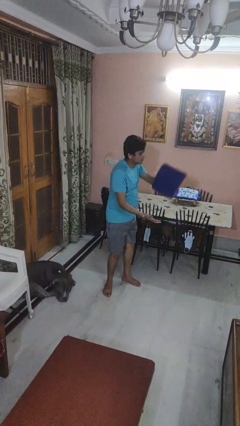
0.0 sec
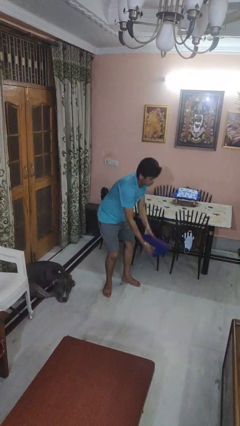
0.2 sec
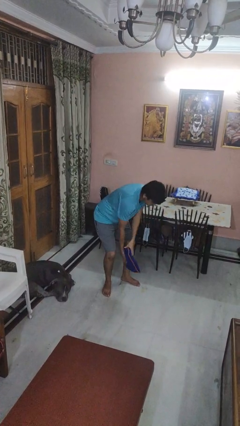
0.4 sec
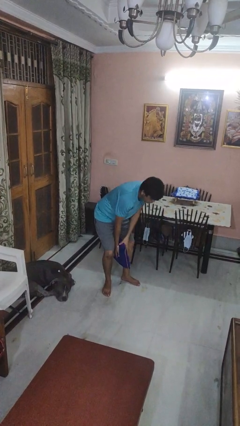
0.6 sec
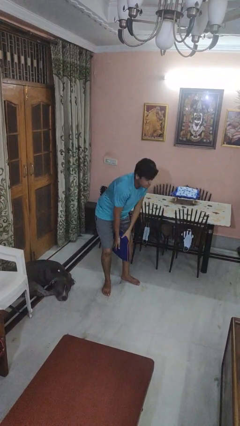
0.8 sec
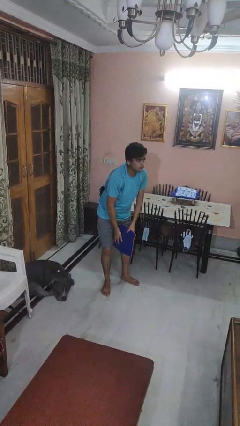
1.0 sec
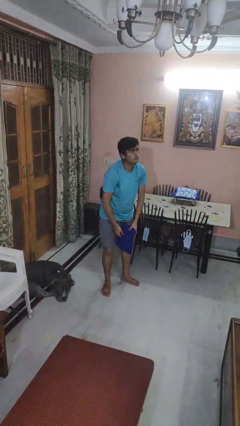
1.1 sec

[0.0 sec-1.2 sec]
person catches dropped object

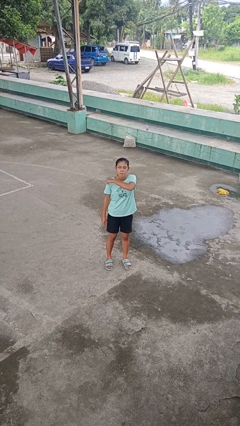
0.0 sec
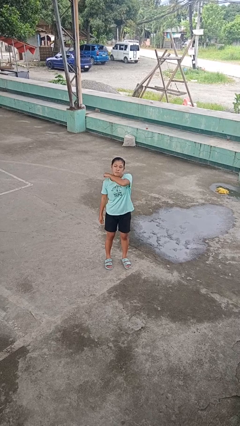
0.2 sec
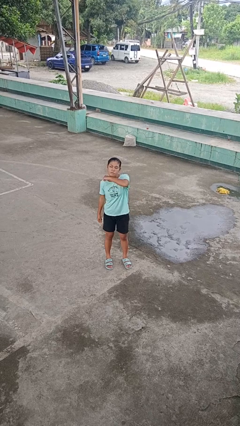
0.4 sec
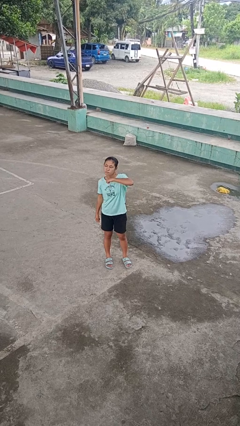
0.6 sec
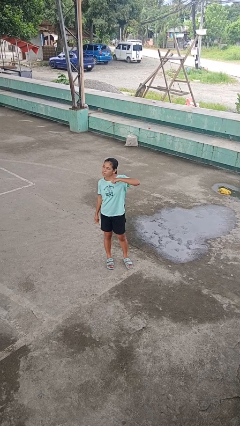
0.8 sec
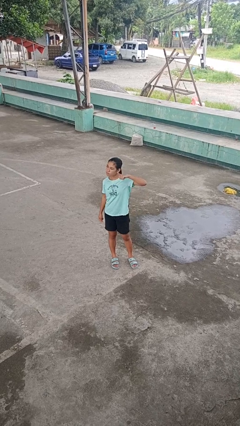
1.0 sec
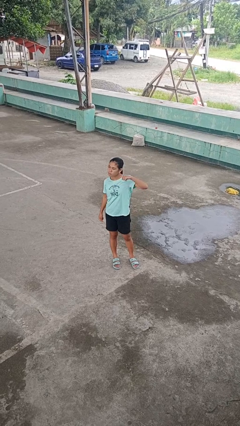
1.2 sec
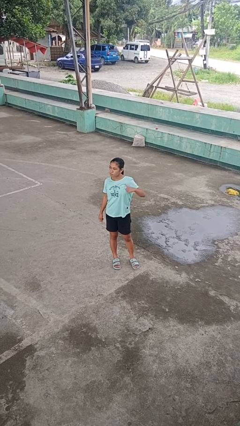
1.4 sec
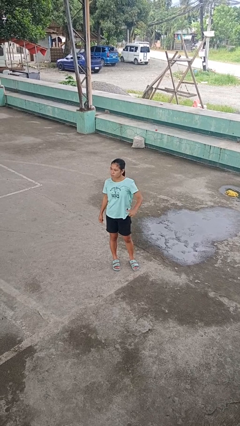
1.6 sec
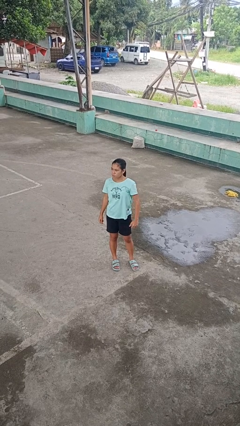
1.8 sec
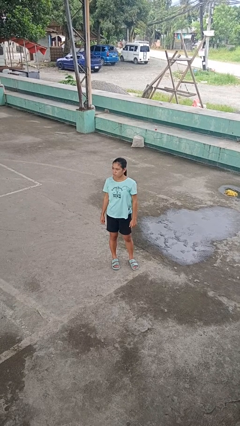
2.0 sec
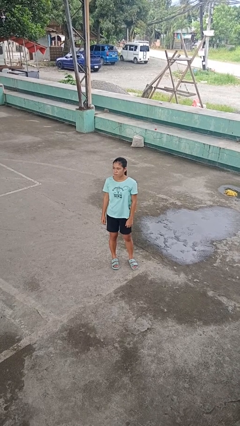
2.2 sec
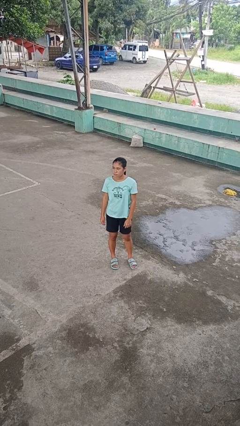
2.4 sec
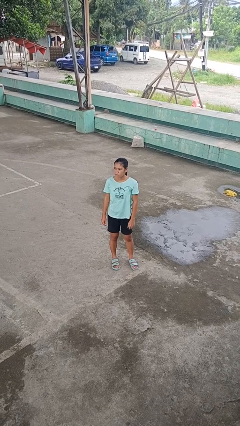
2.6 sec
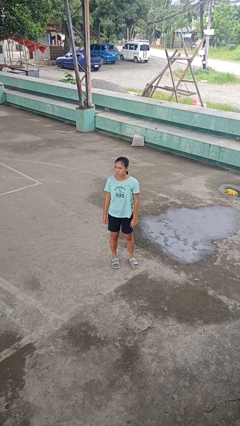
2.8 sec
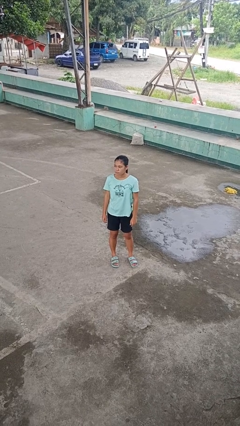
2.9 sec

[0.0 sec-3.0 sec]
person gestures cut

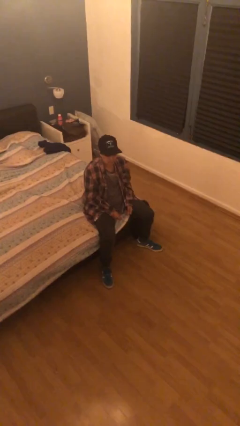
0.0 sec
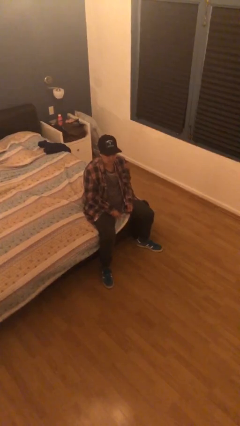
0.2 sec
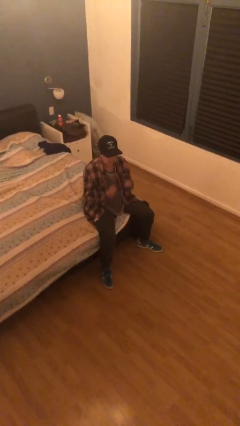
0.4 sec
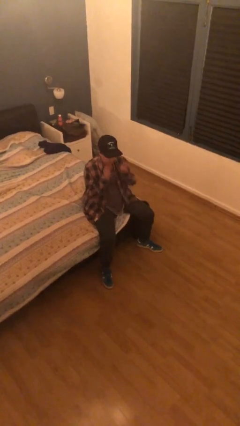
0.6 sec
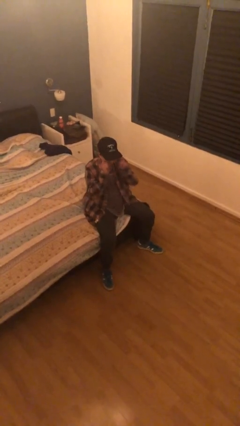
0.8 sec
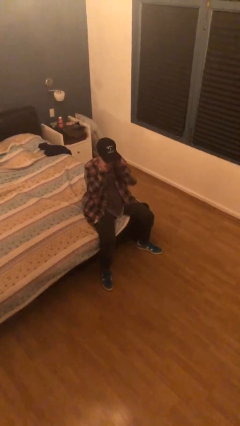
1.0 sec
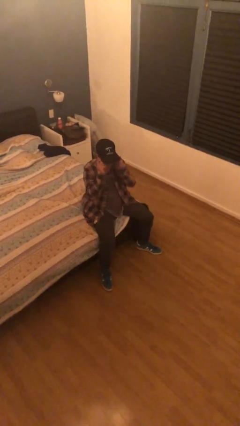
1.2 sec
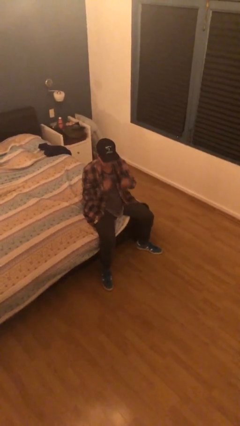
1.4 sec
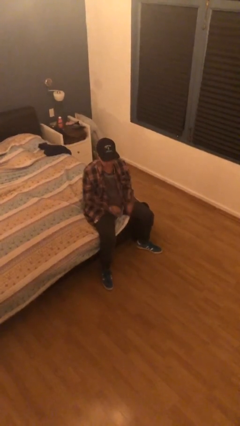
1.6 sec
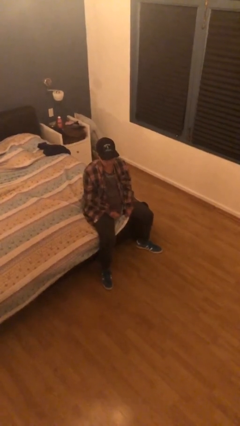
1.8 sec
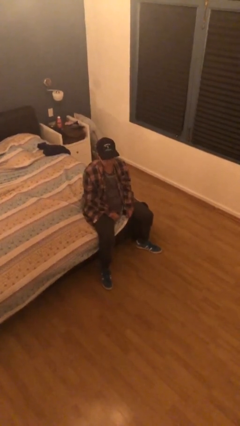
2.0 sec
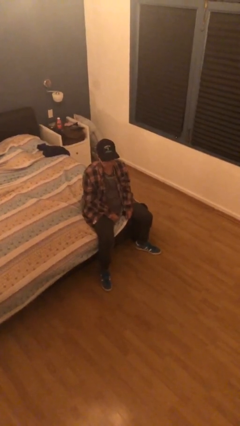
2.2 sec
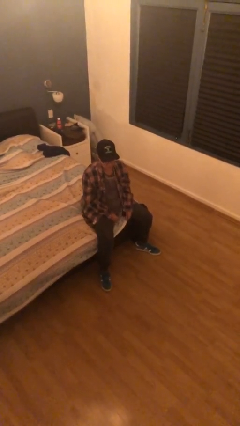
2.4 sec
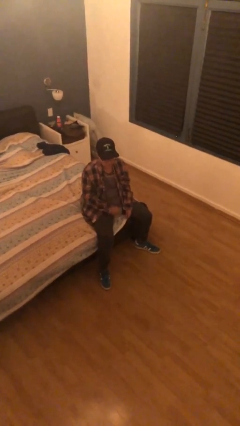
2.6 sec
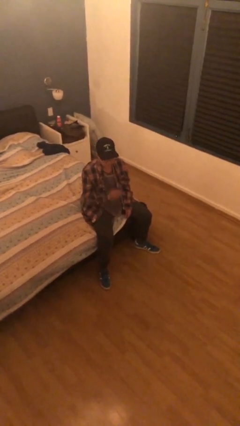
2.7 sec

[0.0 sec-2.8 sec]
person puts on glasses

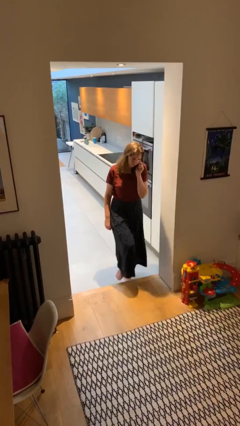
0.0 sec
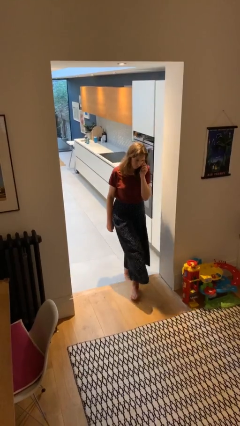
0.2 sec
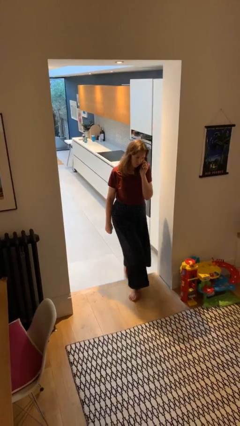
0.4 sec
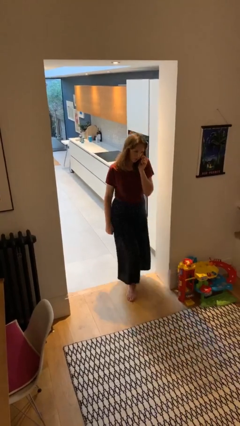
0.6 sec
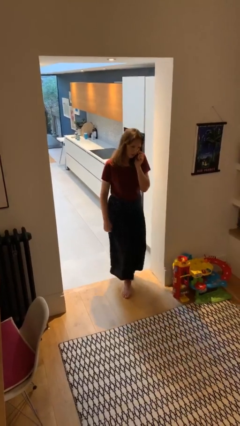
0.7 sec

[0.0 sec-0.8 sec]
person enters scene through structure

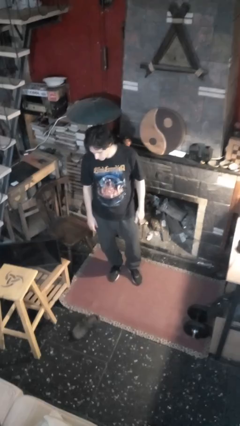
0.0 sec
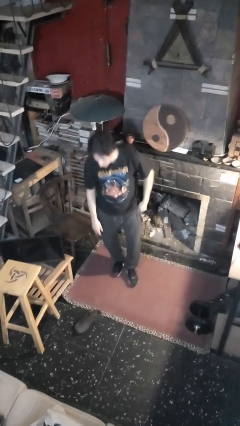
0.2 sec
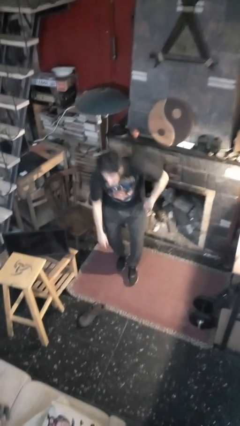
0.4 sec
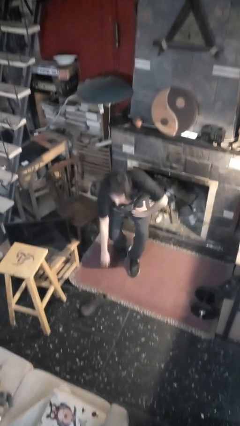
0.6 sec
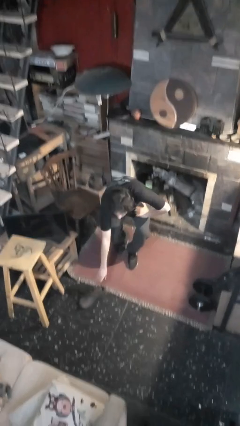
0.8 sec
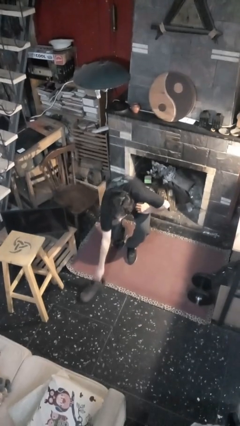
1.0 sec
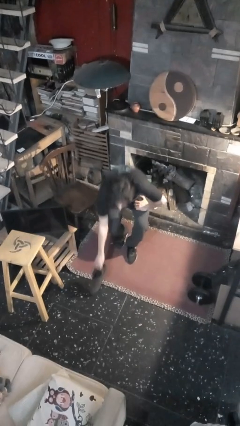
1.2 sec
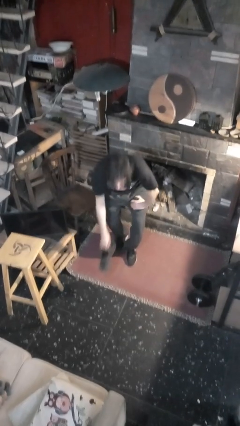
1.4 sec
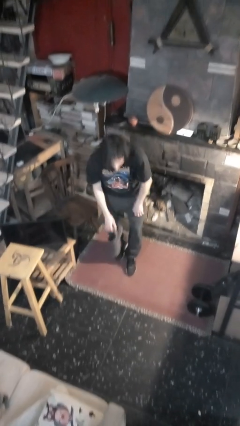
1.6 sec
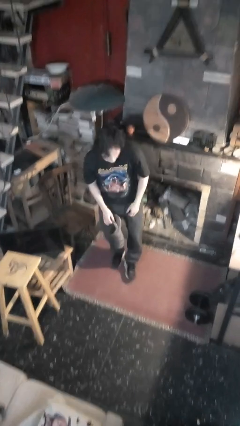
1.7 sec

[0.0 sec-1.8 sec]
person picks up object from floor

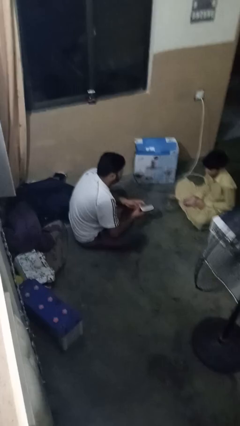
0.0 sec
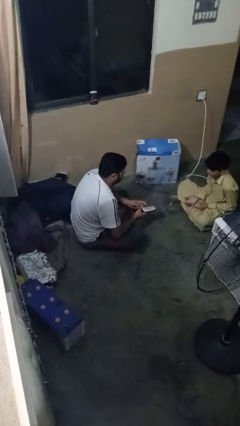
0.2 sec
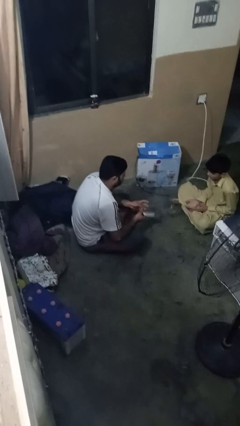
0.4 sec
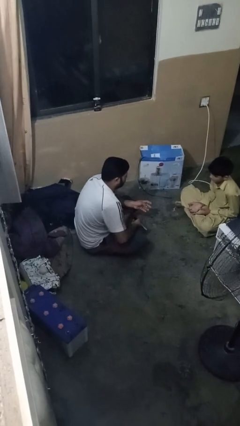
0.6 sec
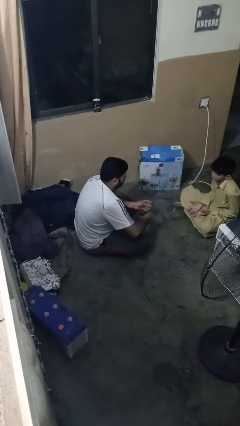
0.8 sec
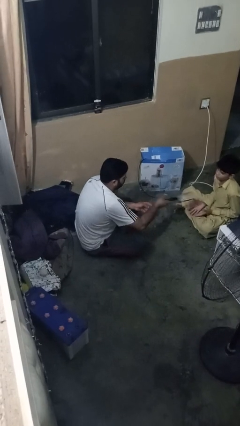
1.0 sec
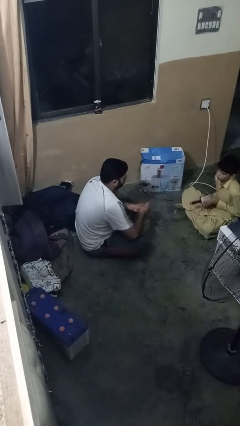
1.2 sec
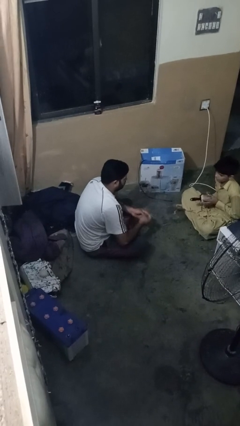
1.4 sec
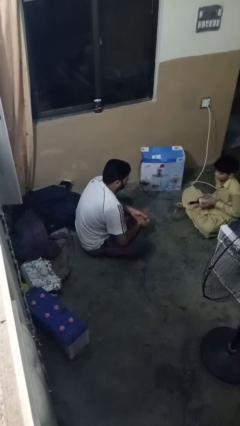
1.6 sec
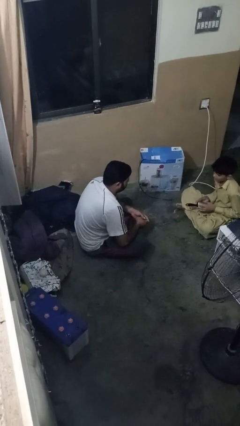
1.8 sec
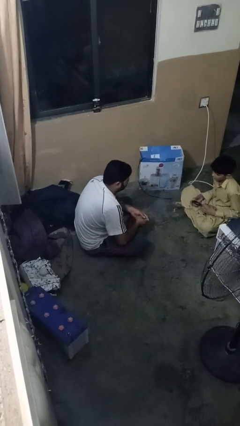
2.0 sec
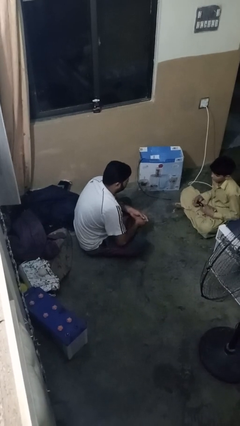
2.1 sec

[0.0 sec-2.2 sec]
person throws object to person

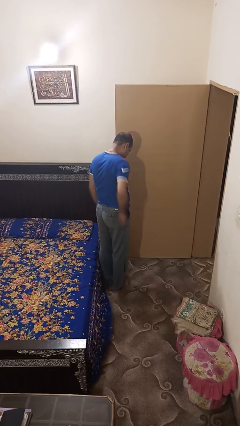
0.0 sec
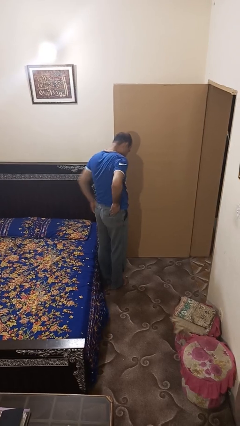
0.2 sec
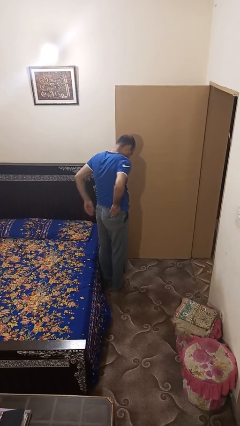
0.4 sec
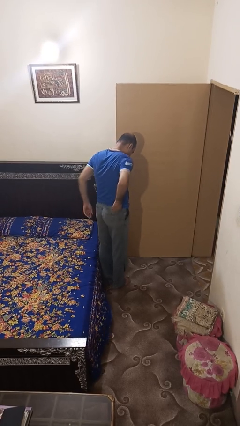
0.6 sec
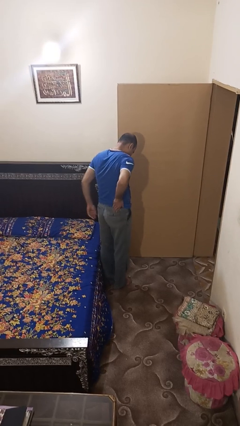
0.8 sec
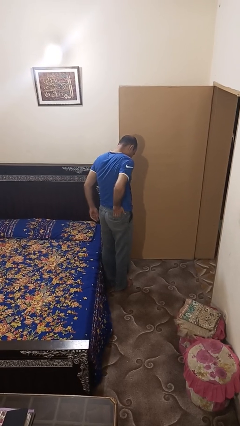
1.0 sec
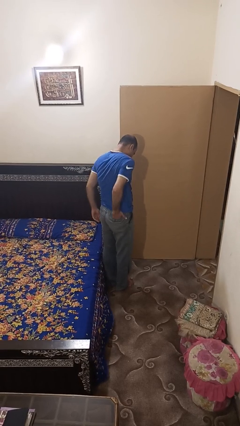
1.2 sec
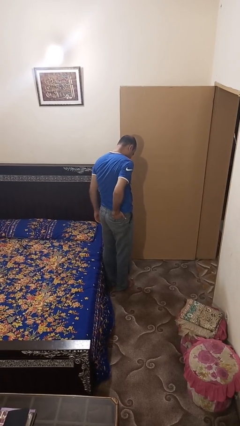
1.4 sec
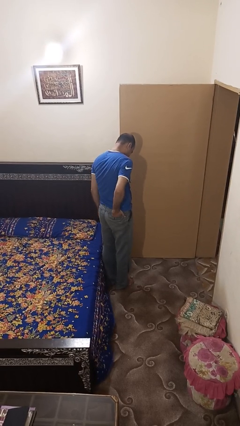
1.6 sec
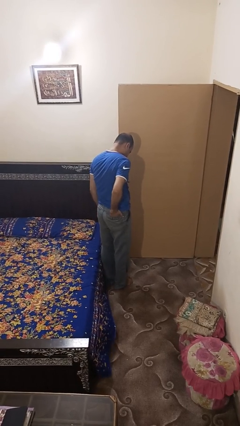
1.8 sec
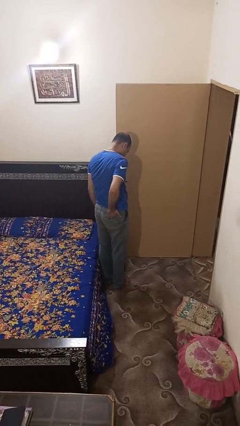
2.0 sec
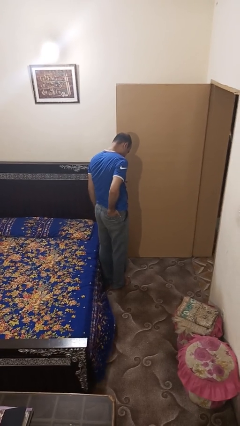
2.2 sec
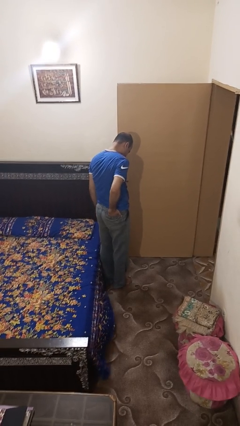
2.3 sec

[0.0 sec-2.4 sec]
person puts hands in back pockets

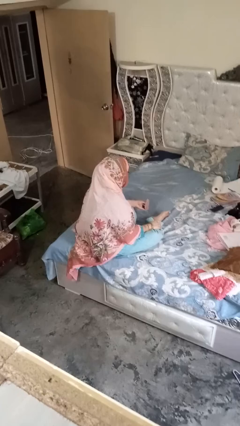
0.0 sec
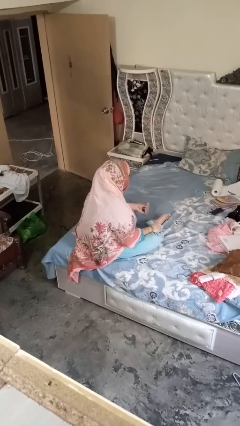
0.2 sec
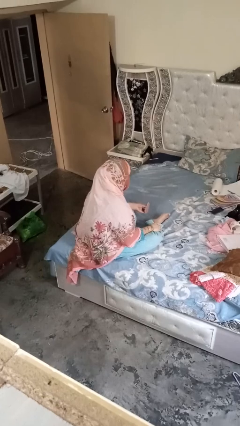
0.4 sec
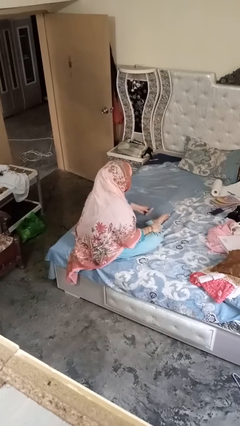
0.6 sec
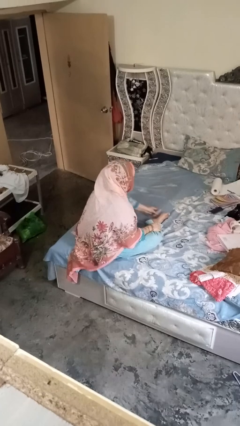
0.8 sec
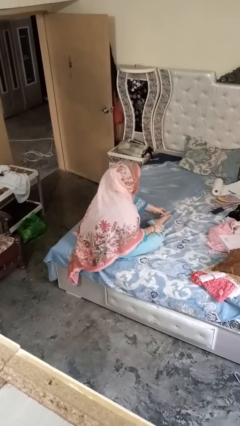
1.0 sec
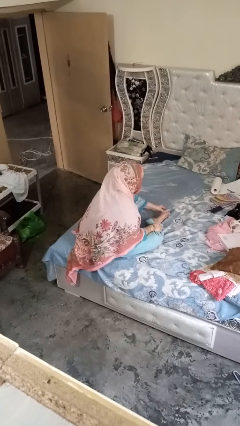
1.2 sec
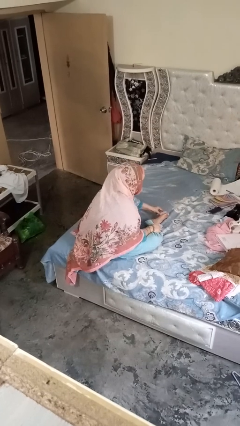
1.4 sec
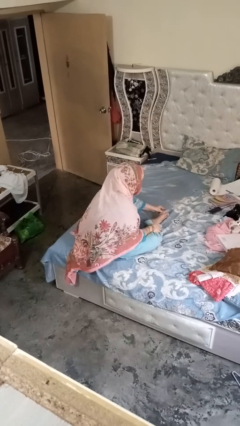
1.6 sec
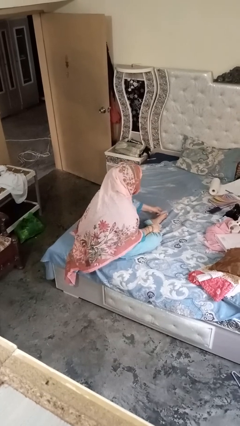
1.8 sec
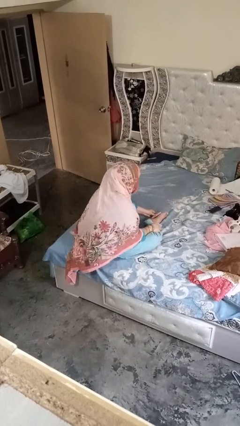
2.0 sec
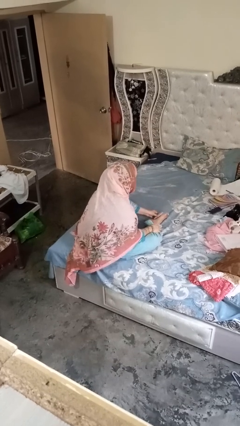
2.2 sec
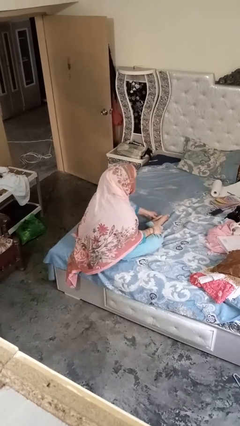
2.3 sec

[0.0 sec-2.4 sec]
person rubs foot

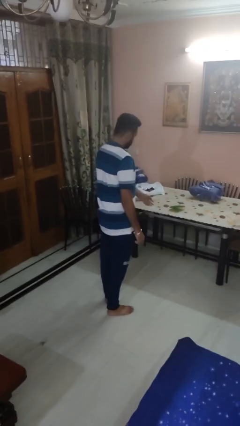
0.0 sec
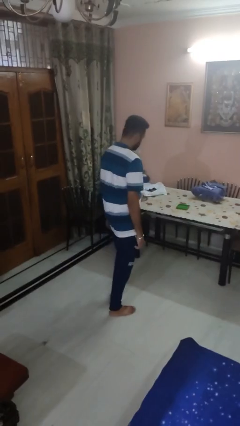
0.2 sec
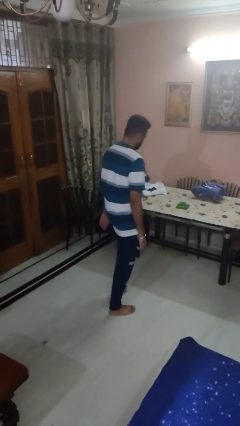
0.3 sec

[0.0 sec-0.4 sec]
person throws object on table
